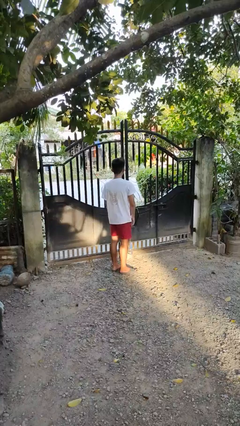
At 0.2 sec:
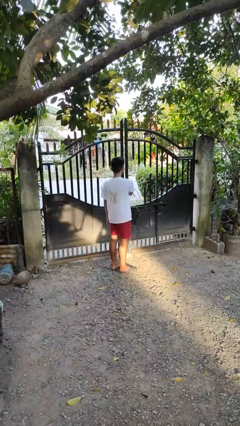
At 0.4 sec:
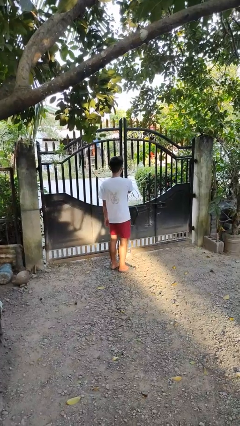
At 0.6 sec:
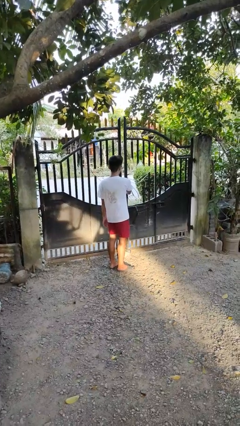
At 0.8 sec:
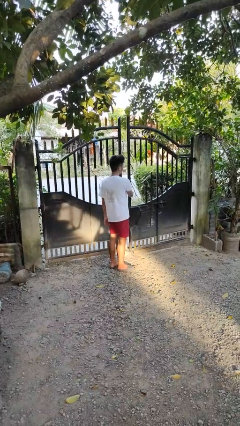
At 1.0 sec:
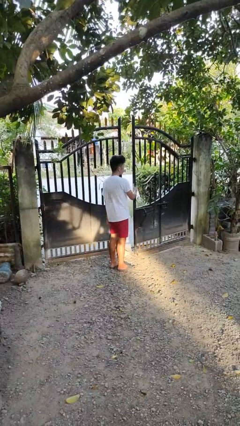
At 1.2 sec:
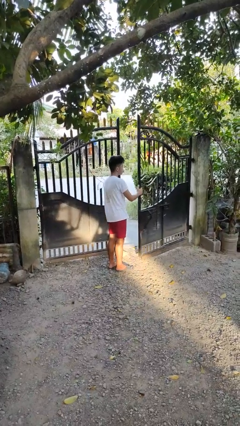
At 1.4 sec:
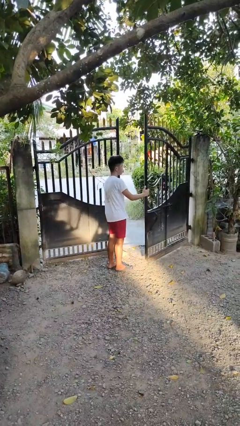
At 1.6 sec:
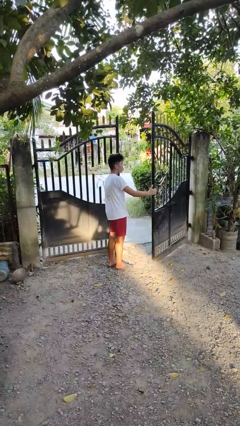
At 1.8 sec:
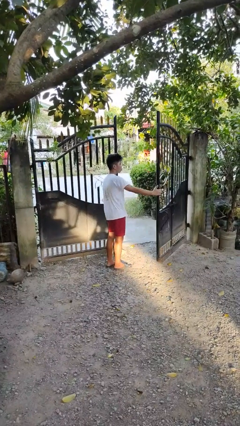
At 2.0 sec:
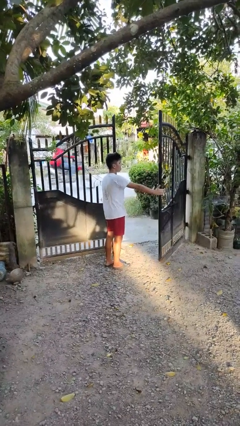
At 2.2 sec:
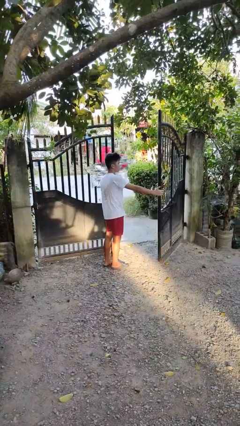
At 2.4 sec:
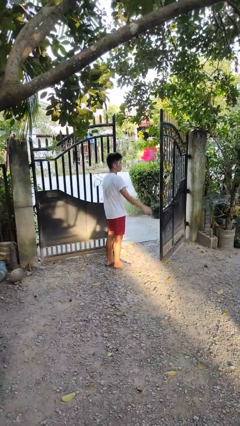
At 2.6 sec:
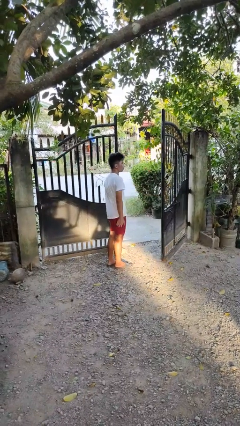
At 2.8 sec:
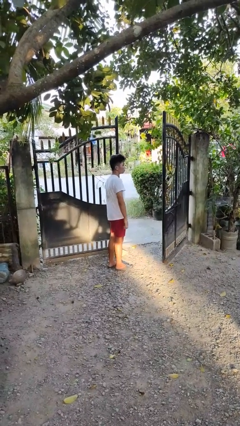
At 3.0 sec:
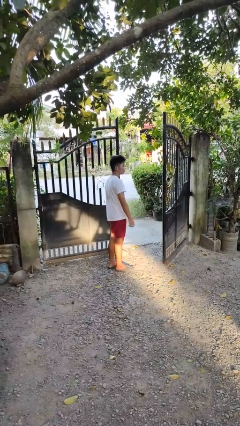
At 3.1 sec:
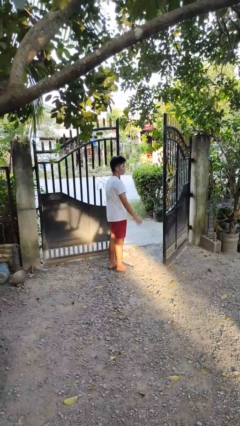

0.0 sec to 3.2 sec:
person opens gate

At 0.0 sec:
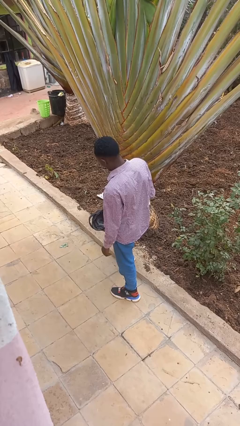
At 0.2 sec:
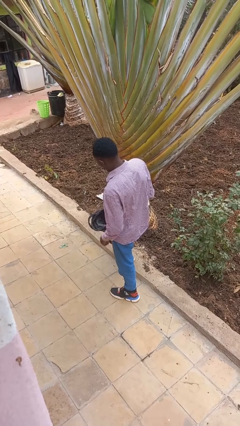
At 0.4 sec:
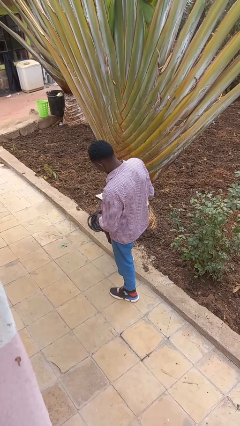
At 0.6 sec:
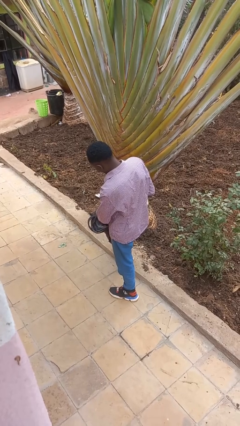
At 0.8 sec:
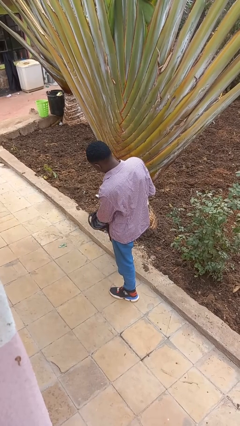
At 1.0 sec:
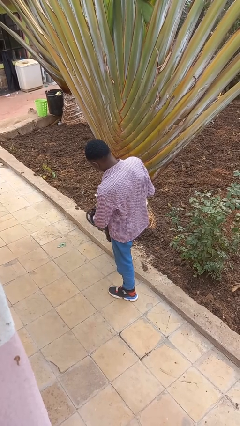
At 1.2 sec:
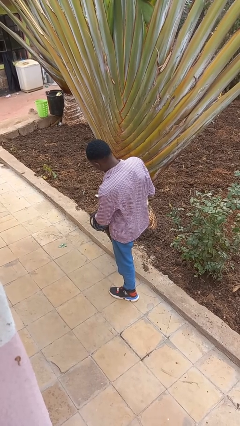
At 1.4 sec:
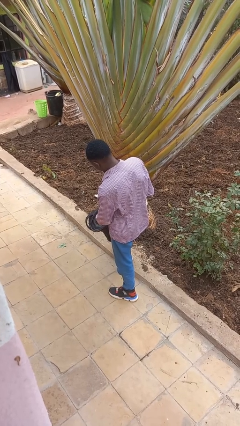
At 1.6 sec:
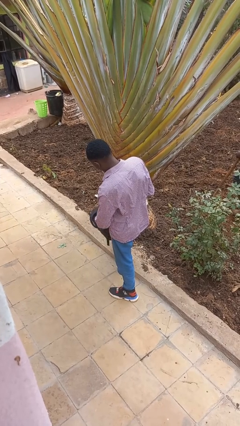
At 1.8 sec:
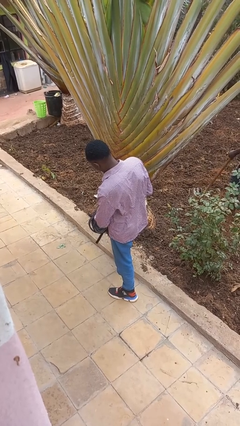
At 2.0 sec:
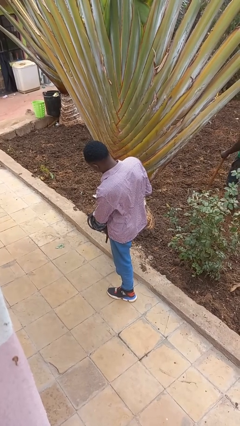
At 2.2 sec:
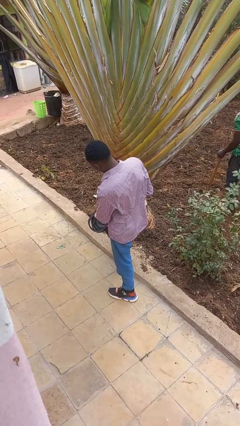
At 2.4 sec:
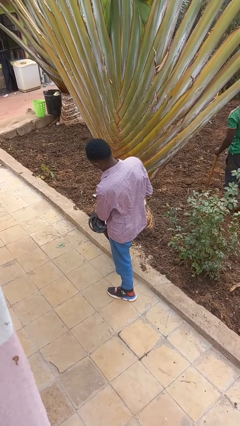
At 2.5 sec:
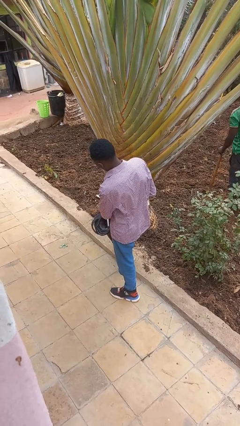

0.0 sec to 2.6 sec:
person searches in backpack

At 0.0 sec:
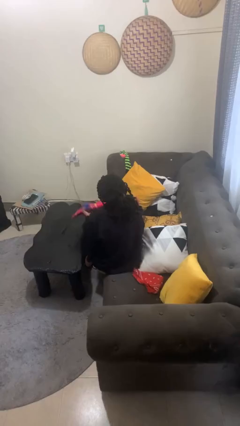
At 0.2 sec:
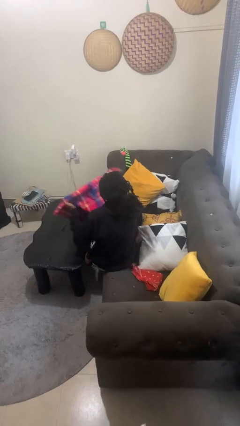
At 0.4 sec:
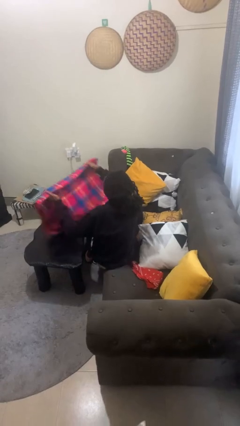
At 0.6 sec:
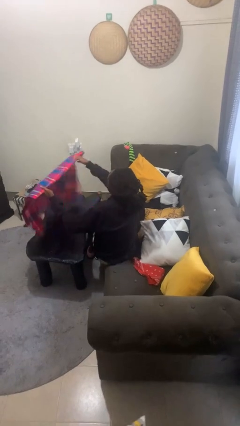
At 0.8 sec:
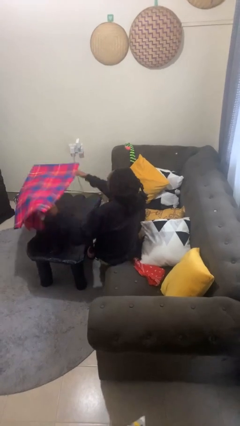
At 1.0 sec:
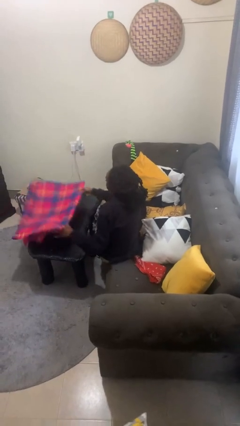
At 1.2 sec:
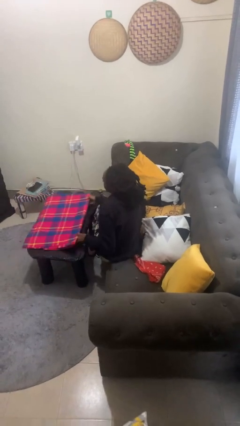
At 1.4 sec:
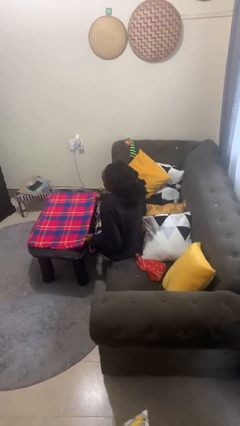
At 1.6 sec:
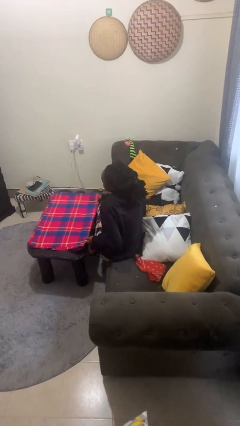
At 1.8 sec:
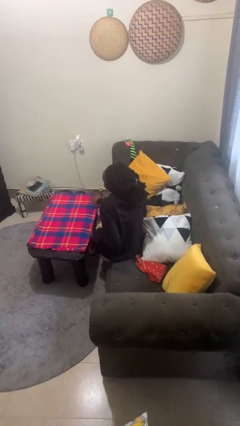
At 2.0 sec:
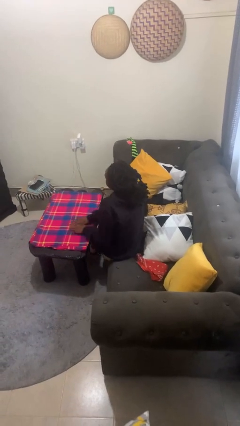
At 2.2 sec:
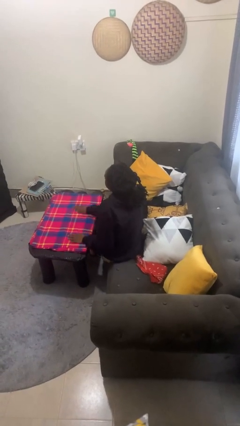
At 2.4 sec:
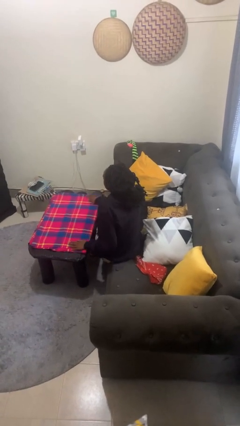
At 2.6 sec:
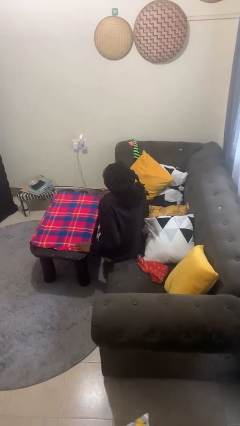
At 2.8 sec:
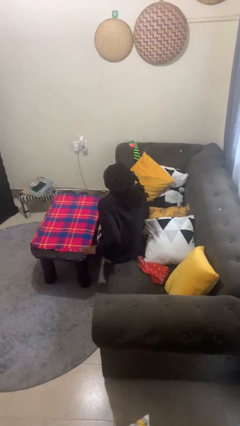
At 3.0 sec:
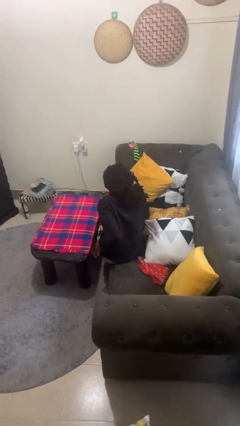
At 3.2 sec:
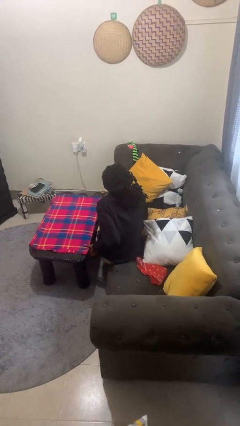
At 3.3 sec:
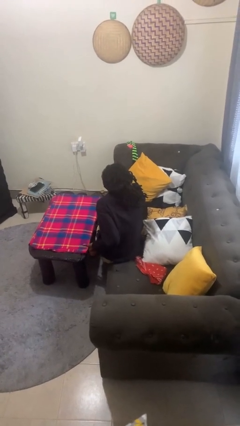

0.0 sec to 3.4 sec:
person spreads tablecloth

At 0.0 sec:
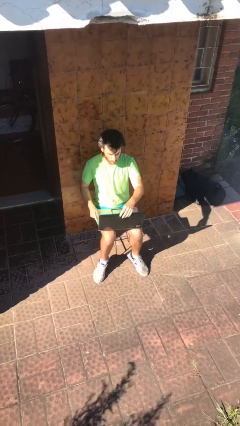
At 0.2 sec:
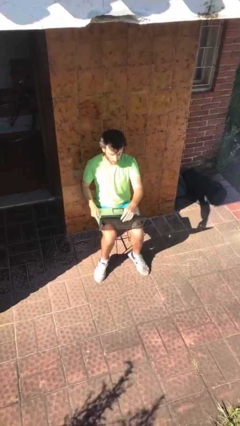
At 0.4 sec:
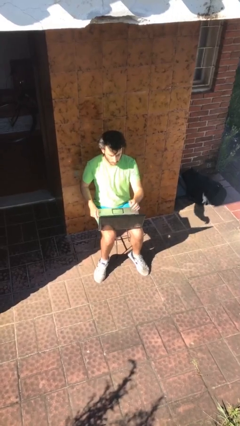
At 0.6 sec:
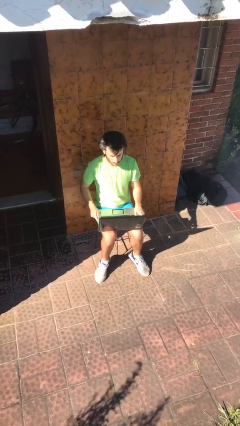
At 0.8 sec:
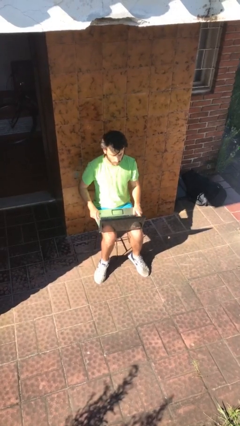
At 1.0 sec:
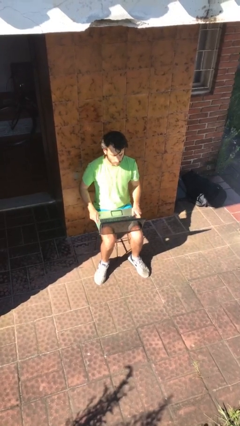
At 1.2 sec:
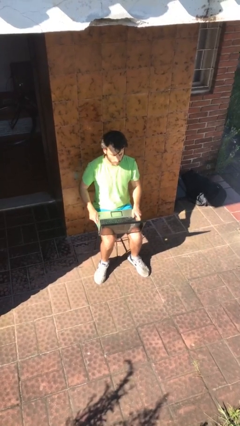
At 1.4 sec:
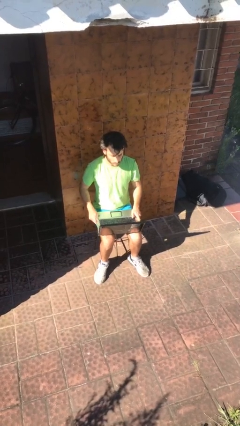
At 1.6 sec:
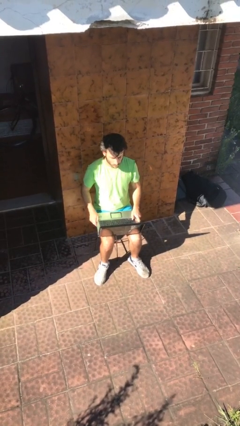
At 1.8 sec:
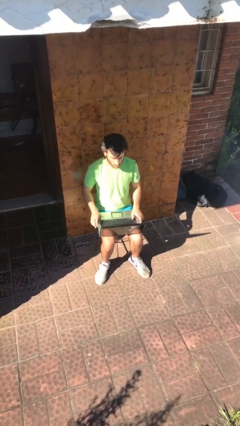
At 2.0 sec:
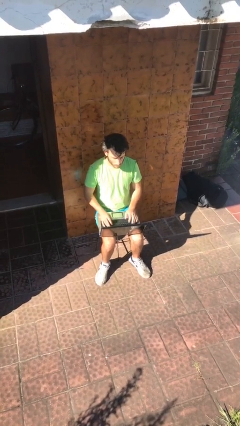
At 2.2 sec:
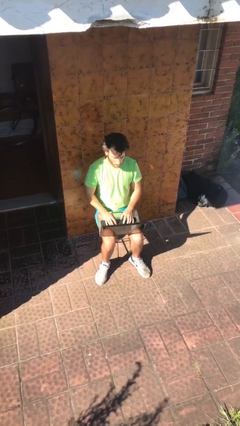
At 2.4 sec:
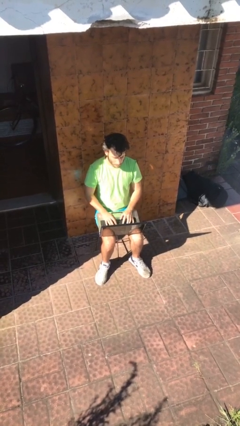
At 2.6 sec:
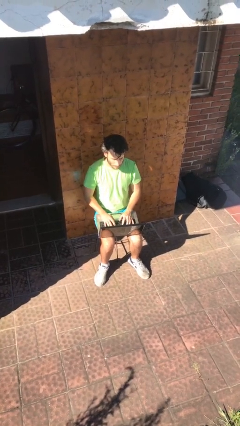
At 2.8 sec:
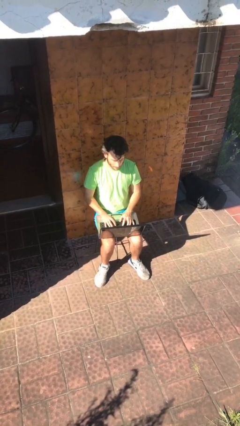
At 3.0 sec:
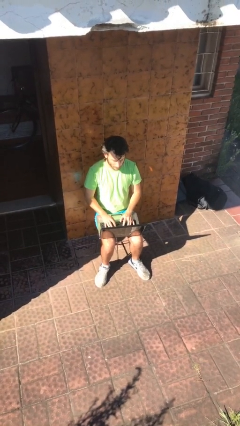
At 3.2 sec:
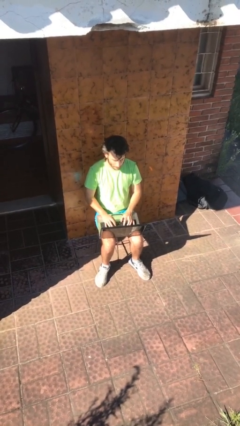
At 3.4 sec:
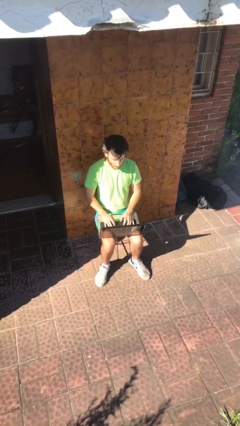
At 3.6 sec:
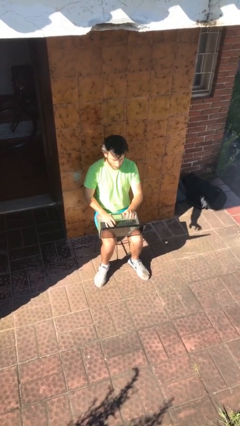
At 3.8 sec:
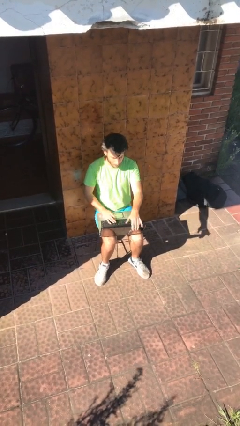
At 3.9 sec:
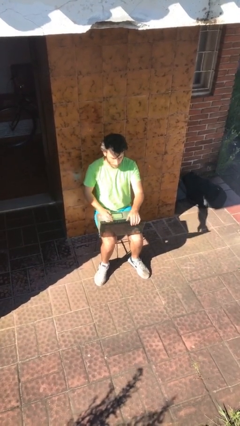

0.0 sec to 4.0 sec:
person interacts with laptop

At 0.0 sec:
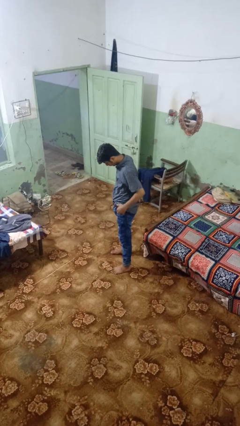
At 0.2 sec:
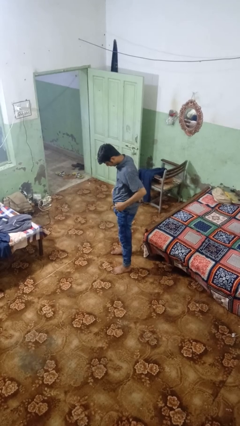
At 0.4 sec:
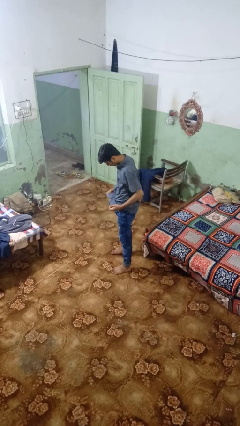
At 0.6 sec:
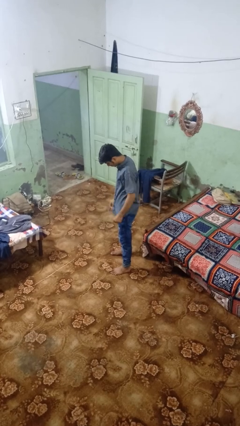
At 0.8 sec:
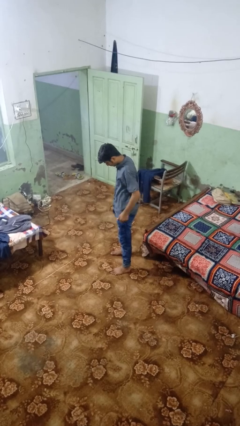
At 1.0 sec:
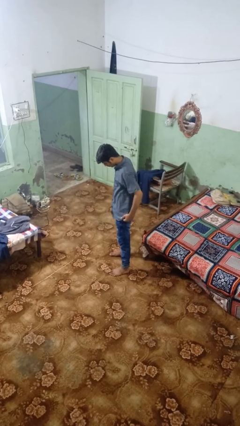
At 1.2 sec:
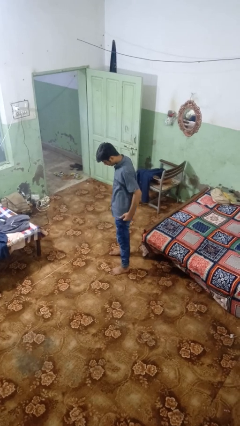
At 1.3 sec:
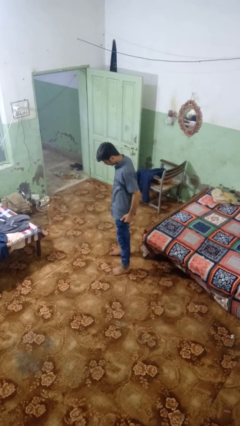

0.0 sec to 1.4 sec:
person untucks shirt

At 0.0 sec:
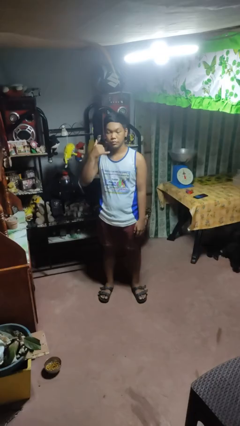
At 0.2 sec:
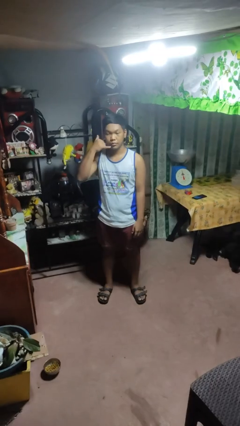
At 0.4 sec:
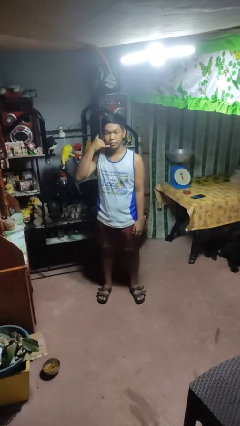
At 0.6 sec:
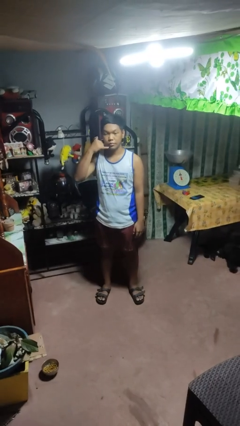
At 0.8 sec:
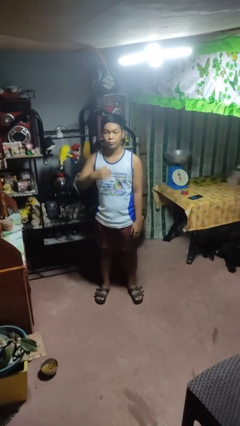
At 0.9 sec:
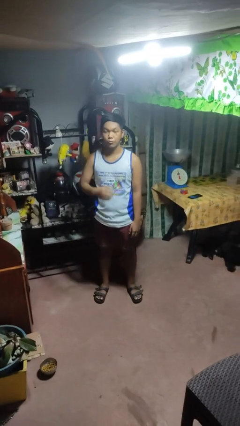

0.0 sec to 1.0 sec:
person gestures call me

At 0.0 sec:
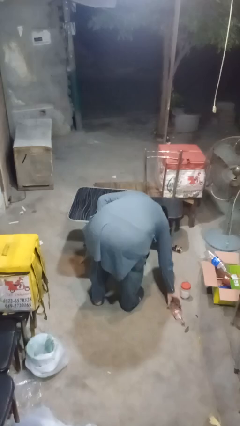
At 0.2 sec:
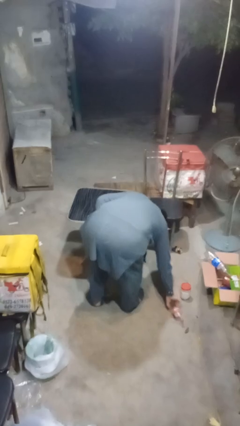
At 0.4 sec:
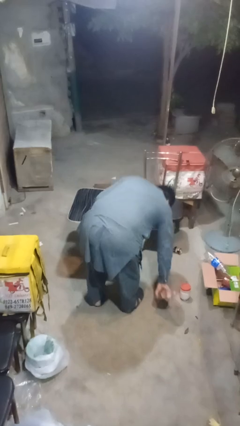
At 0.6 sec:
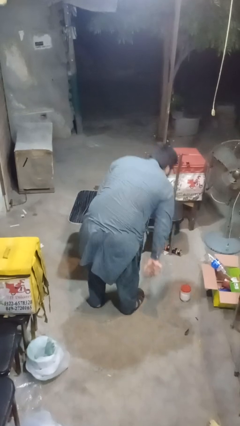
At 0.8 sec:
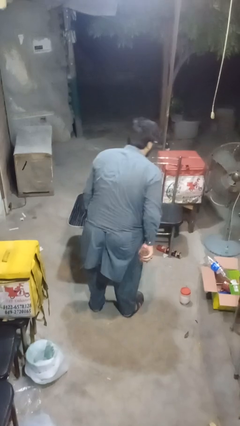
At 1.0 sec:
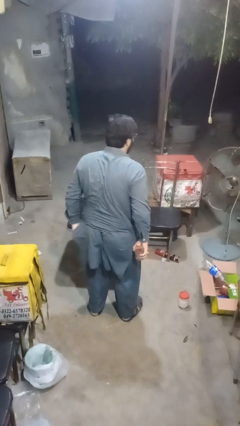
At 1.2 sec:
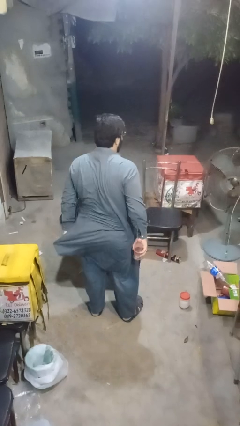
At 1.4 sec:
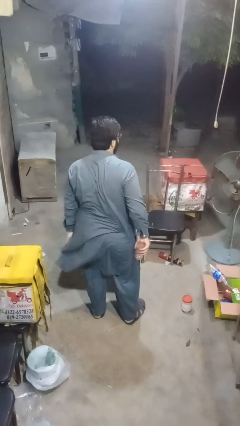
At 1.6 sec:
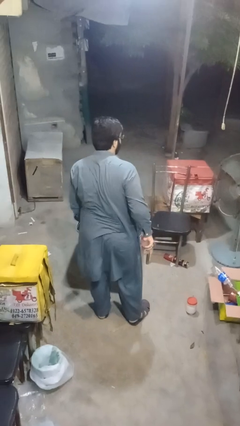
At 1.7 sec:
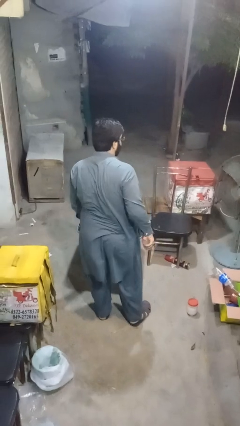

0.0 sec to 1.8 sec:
person picks up object from floor
